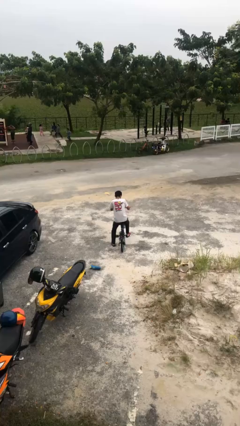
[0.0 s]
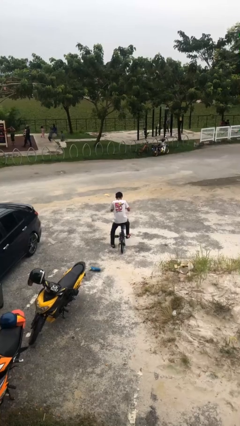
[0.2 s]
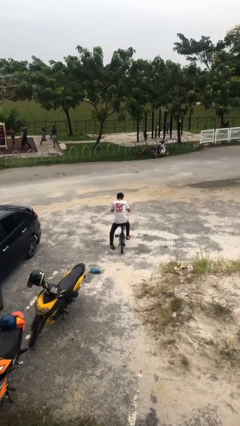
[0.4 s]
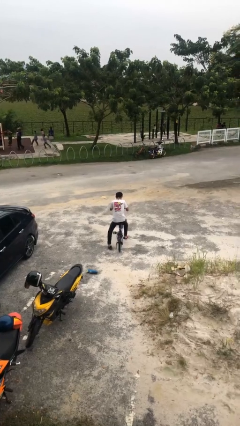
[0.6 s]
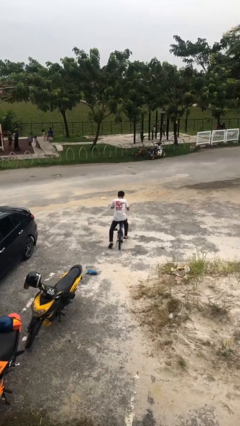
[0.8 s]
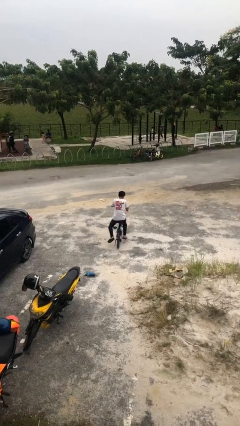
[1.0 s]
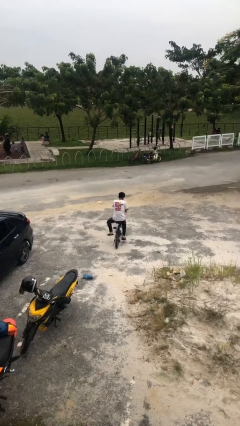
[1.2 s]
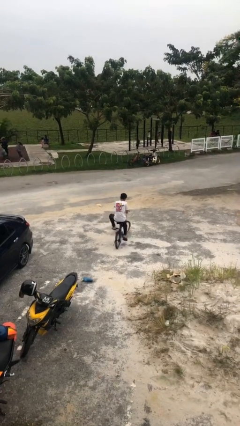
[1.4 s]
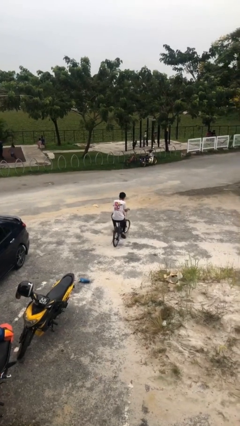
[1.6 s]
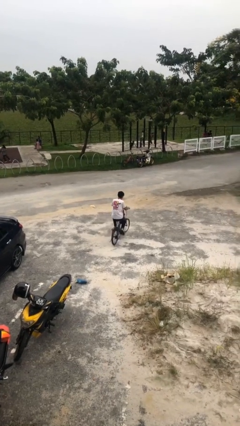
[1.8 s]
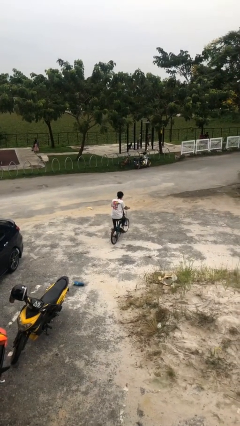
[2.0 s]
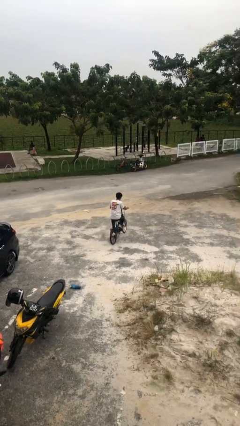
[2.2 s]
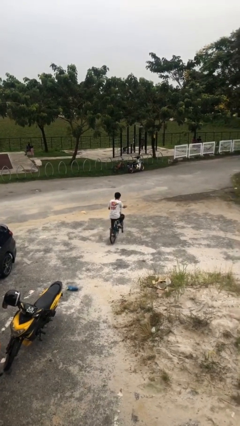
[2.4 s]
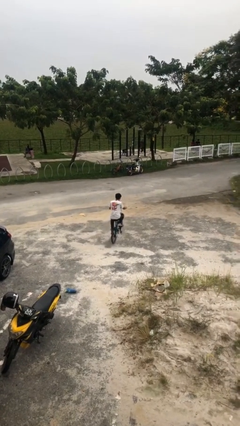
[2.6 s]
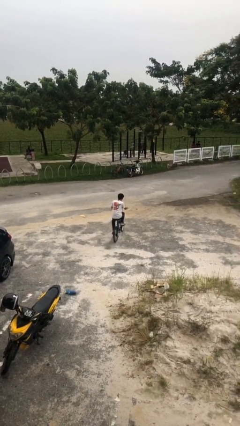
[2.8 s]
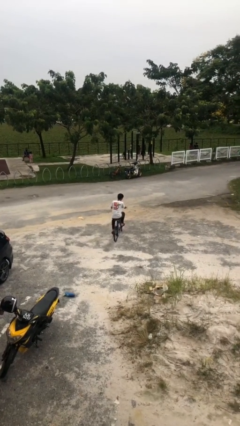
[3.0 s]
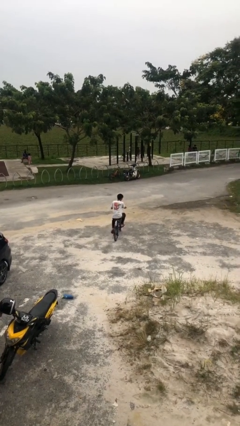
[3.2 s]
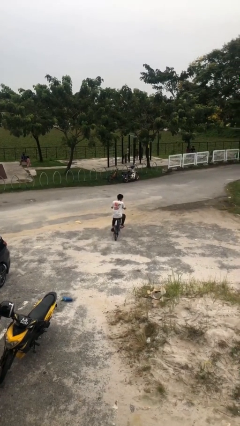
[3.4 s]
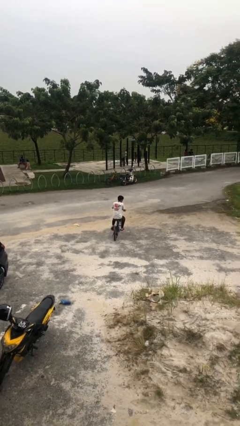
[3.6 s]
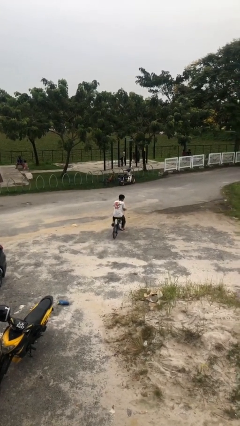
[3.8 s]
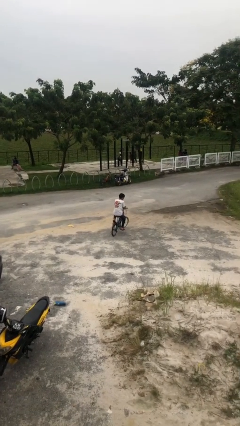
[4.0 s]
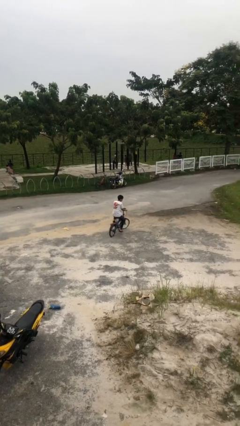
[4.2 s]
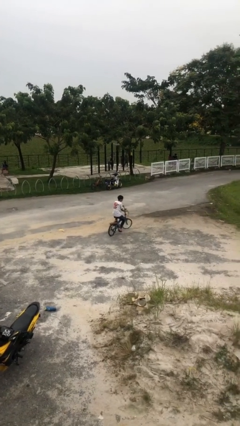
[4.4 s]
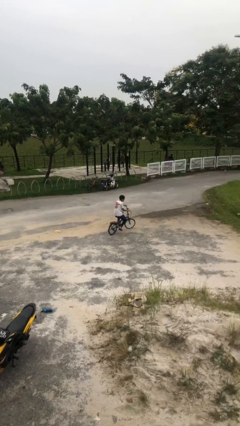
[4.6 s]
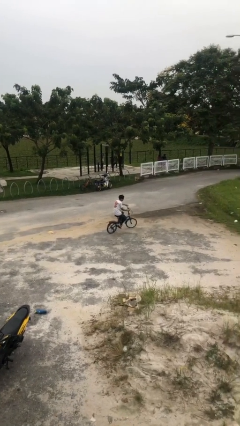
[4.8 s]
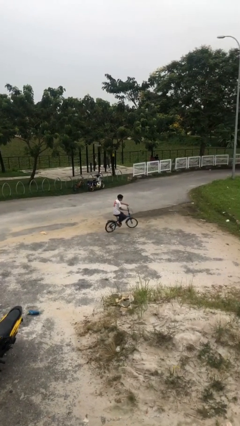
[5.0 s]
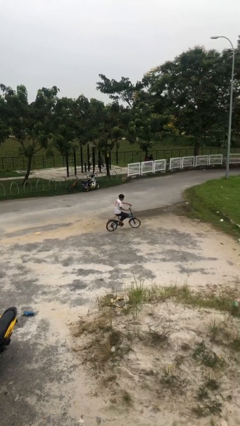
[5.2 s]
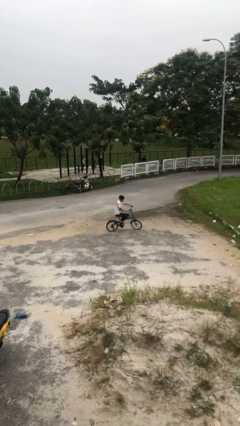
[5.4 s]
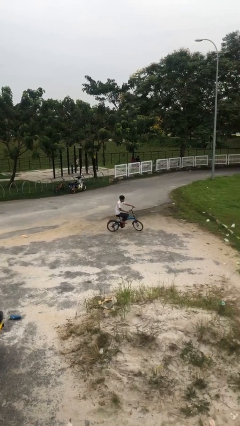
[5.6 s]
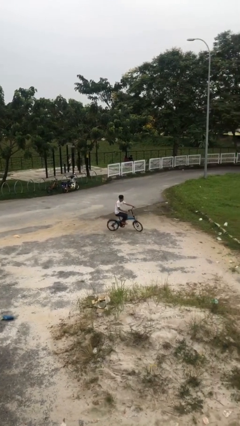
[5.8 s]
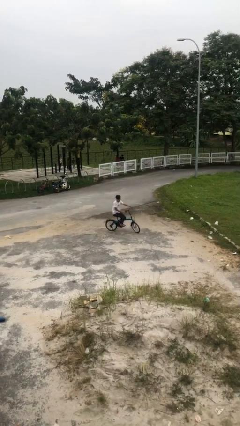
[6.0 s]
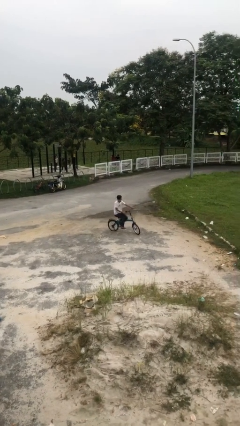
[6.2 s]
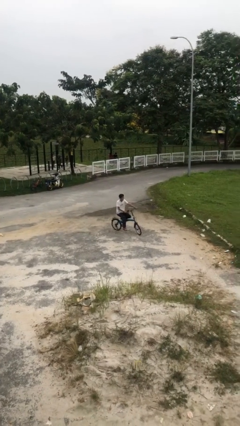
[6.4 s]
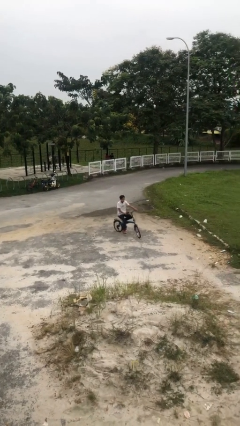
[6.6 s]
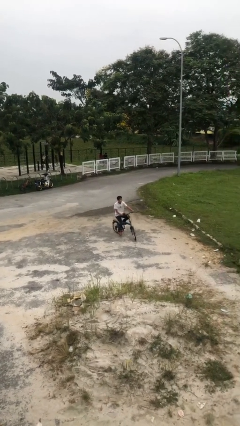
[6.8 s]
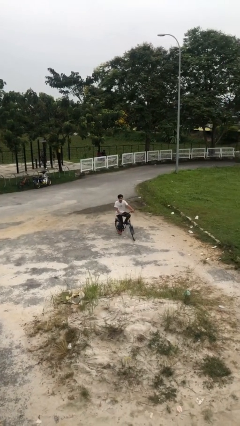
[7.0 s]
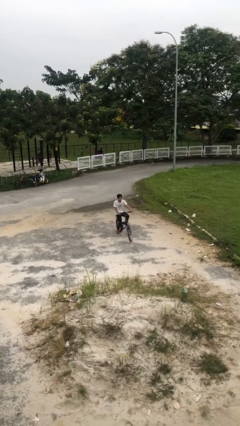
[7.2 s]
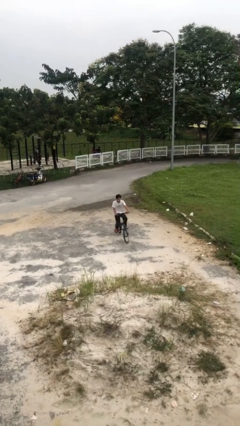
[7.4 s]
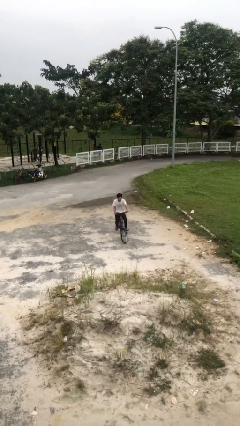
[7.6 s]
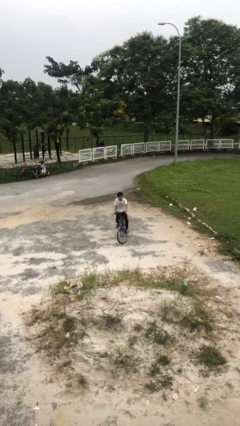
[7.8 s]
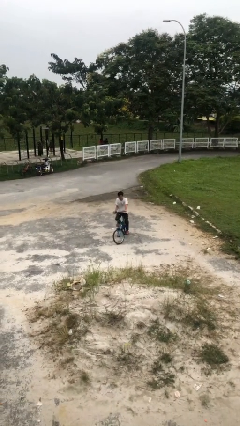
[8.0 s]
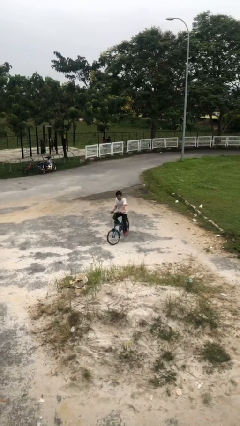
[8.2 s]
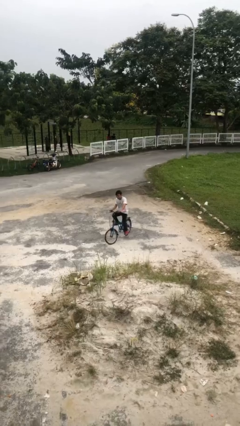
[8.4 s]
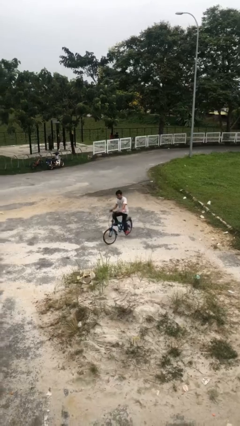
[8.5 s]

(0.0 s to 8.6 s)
person rides bicycle

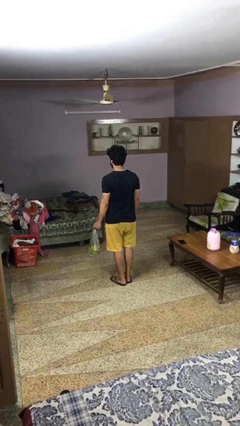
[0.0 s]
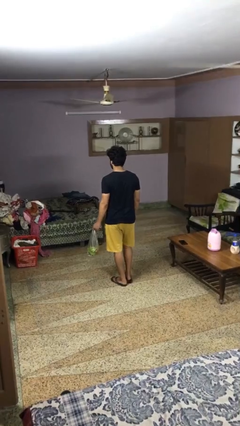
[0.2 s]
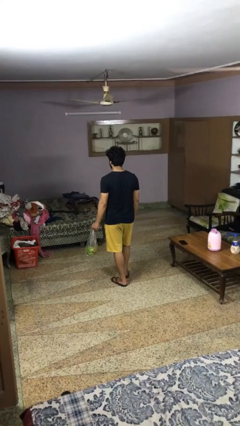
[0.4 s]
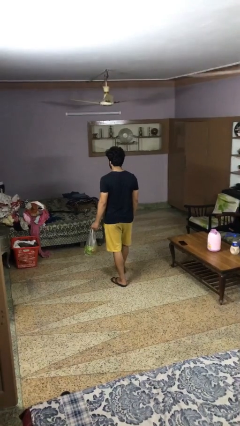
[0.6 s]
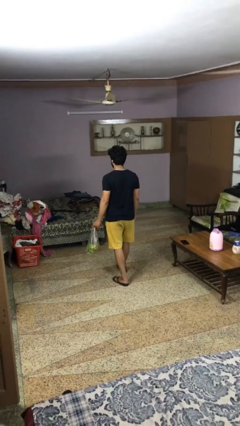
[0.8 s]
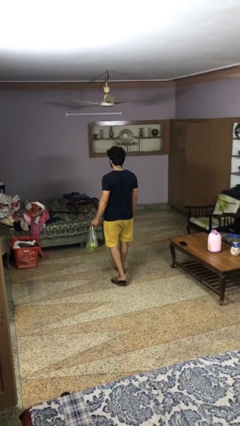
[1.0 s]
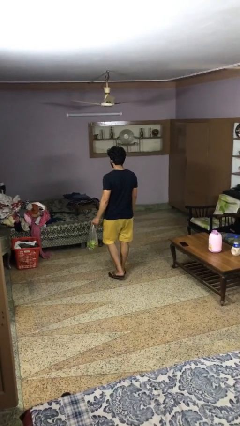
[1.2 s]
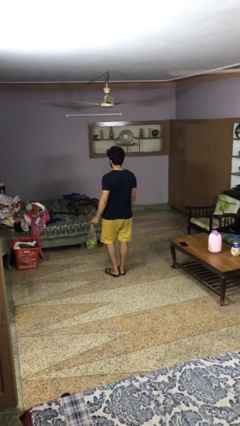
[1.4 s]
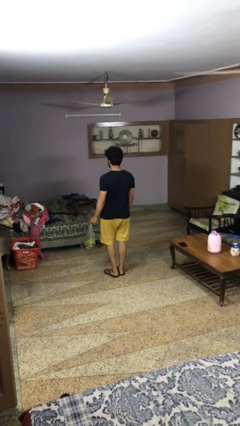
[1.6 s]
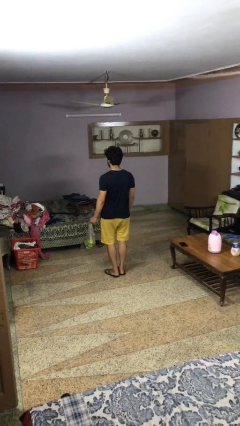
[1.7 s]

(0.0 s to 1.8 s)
person carries groceries

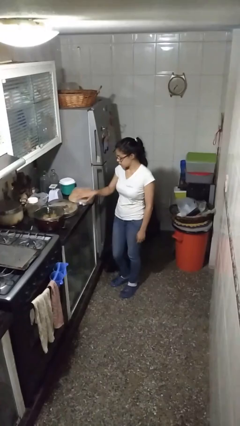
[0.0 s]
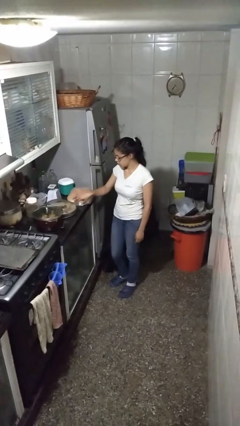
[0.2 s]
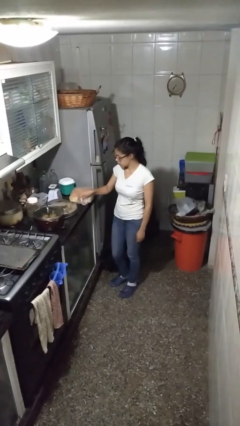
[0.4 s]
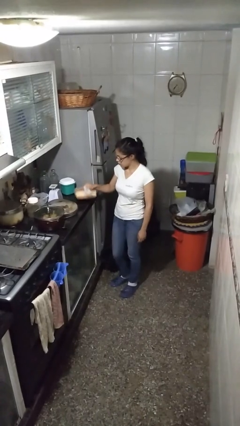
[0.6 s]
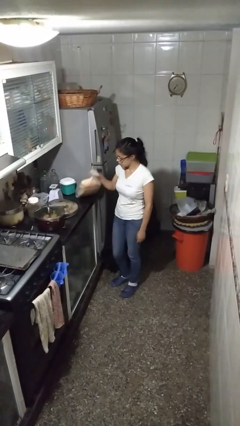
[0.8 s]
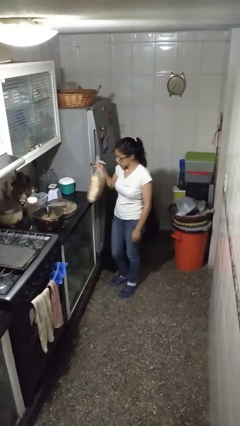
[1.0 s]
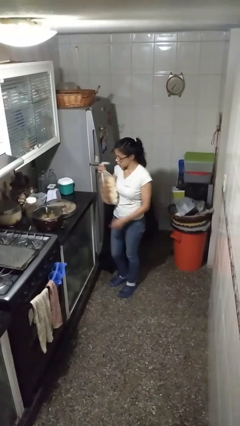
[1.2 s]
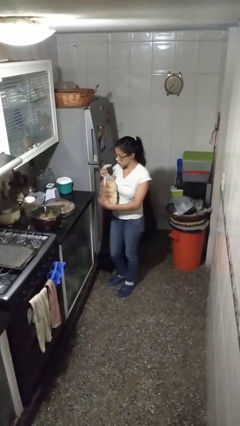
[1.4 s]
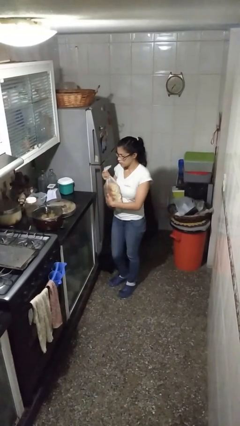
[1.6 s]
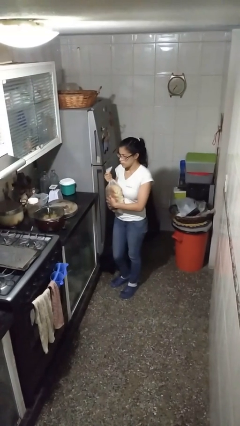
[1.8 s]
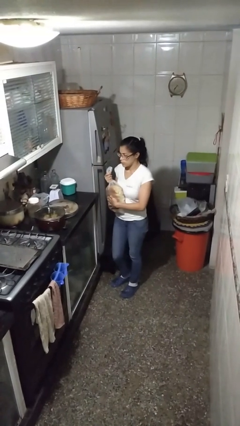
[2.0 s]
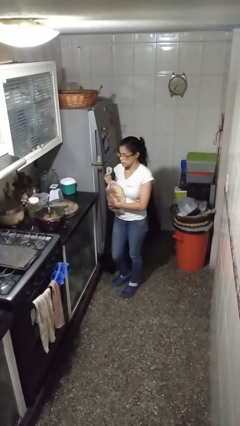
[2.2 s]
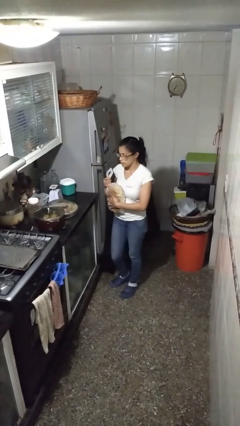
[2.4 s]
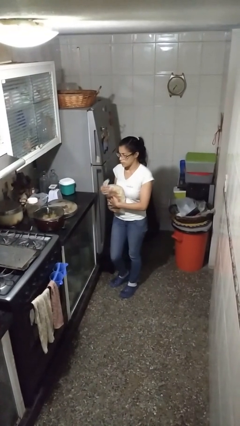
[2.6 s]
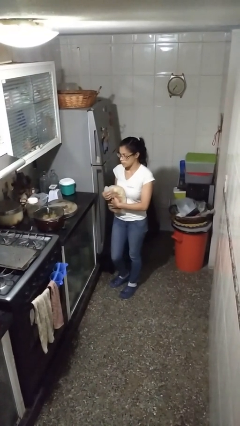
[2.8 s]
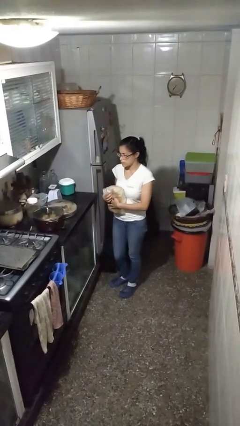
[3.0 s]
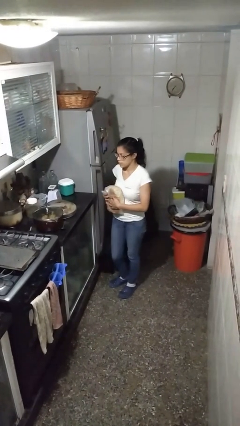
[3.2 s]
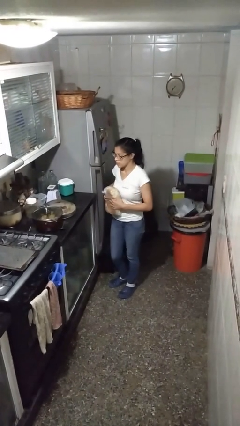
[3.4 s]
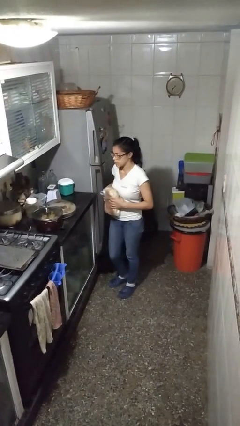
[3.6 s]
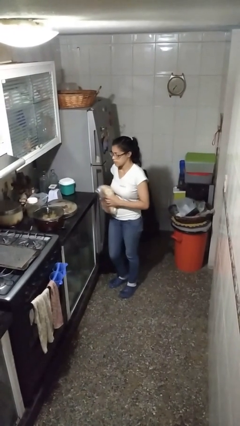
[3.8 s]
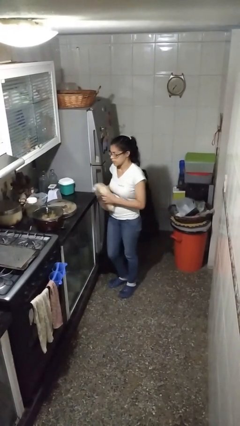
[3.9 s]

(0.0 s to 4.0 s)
person picks up object from countertop

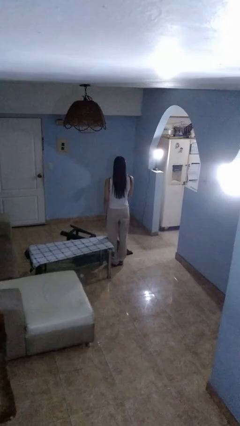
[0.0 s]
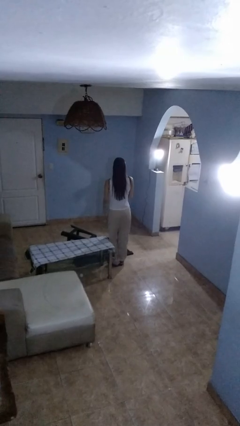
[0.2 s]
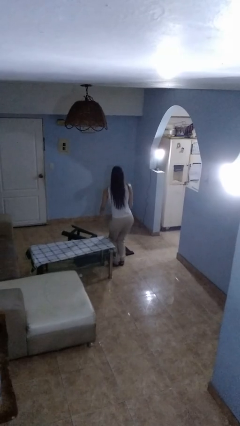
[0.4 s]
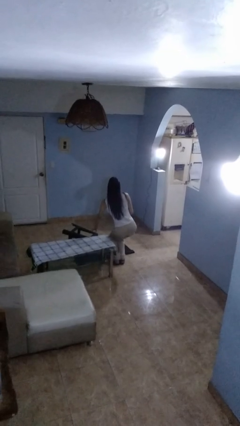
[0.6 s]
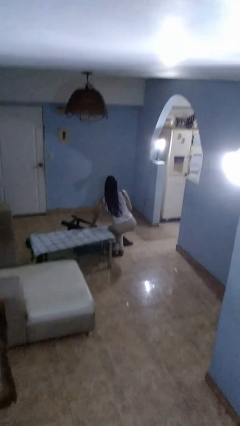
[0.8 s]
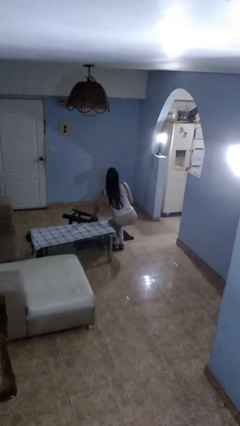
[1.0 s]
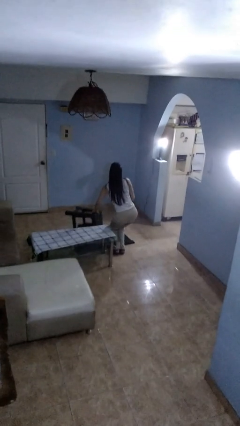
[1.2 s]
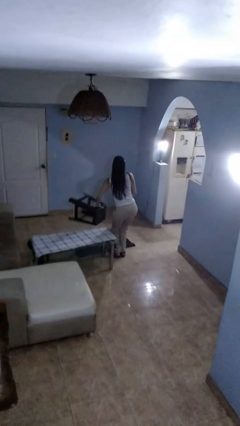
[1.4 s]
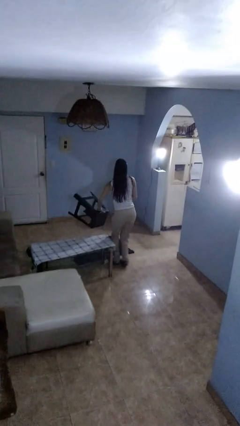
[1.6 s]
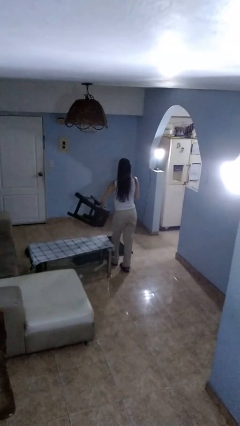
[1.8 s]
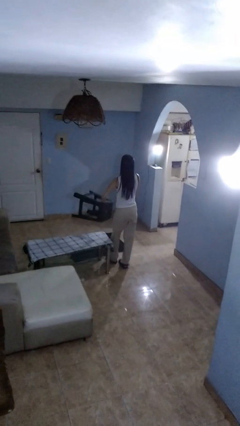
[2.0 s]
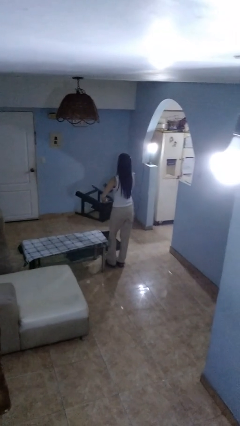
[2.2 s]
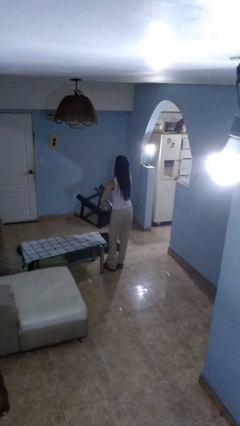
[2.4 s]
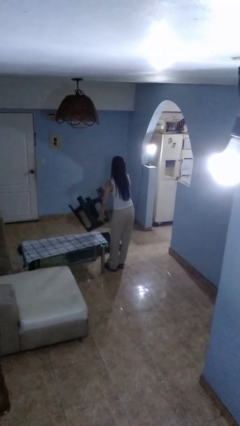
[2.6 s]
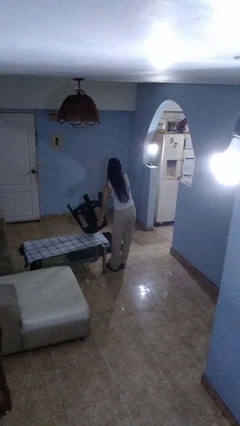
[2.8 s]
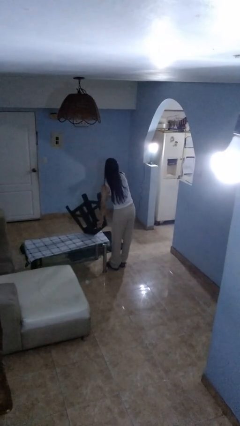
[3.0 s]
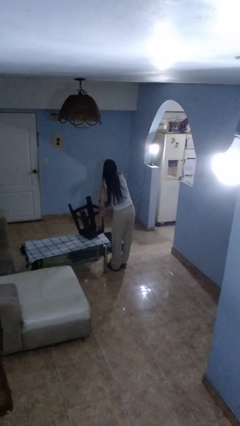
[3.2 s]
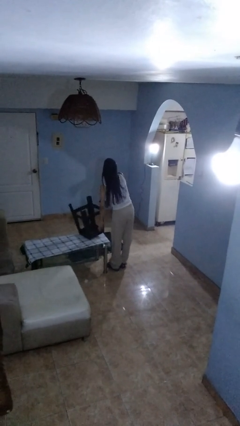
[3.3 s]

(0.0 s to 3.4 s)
person sets upright furniture
